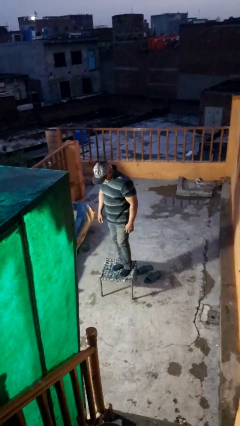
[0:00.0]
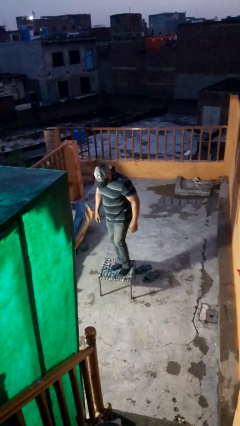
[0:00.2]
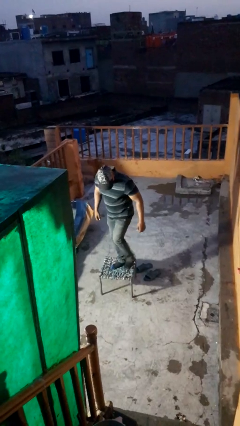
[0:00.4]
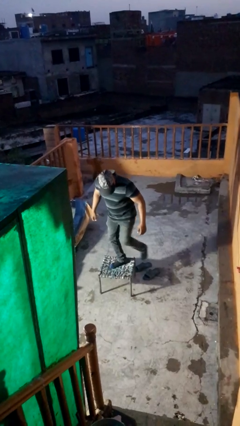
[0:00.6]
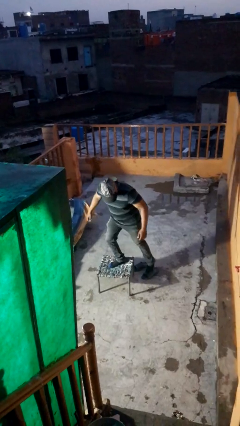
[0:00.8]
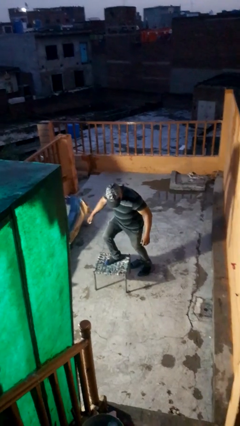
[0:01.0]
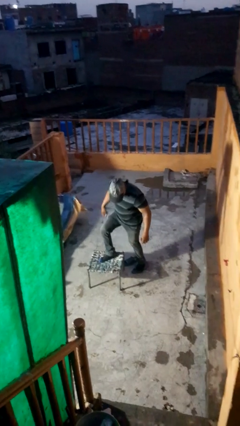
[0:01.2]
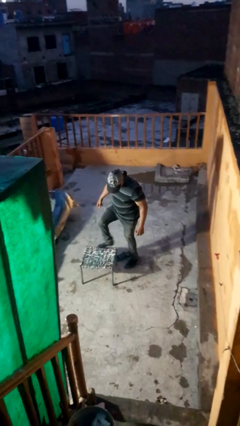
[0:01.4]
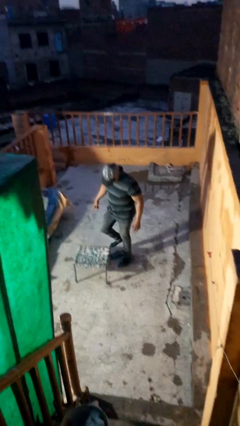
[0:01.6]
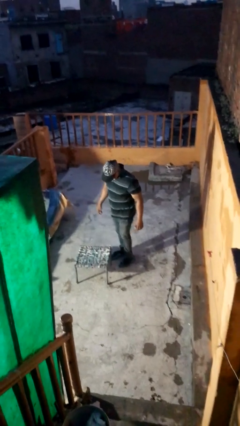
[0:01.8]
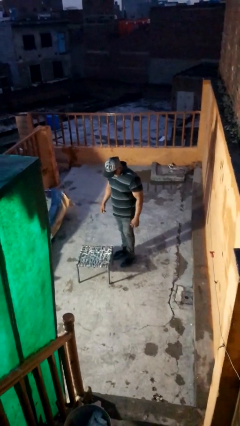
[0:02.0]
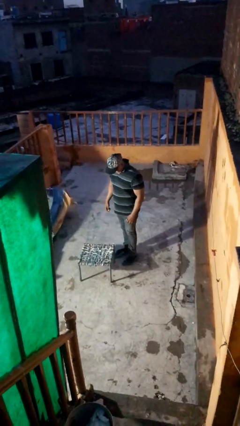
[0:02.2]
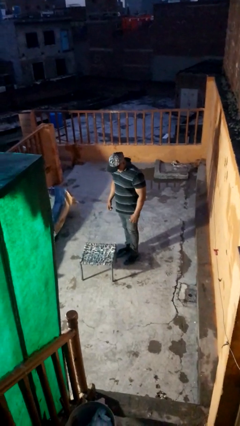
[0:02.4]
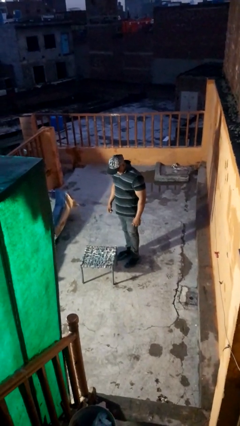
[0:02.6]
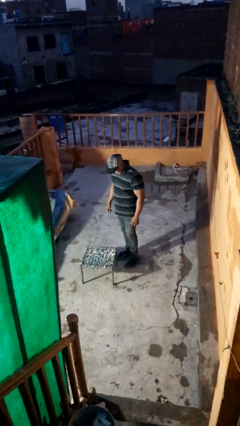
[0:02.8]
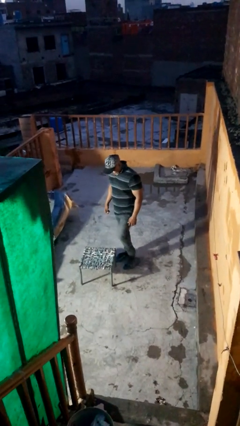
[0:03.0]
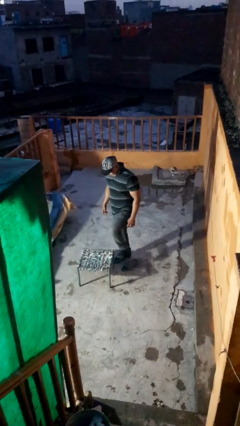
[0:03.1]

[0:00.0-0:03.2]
person climbs off table

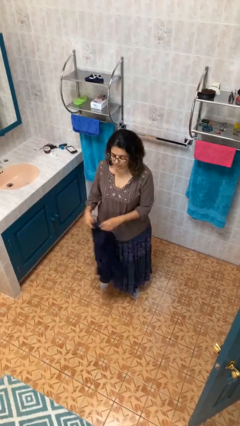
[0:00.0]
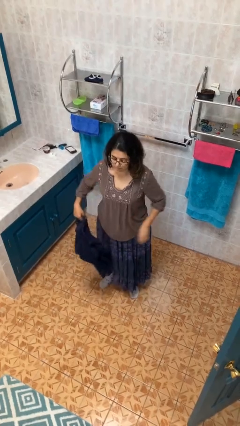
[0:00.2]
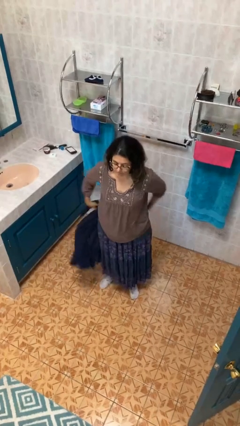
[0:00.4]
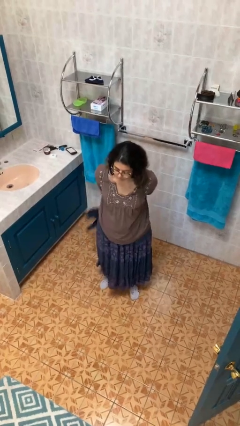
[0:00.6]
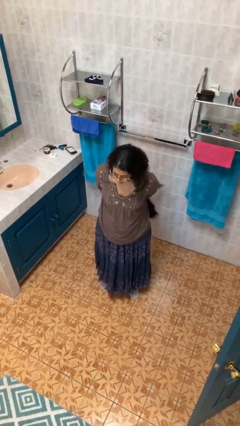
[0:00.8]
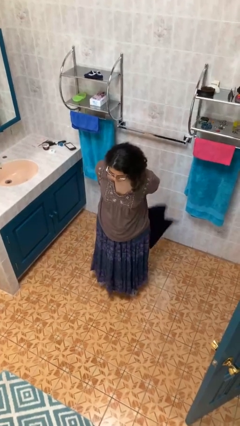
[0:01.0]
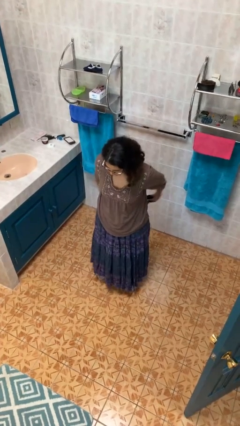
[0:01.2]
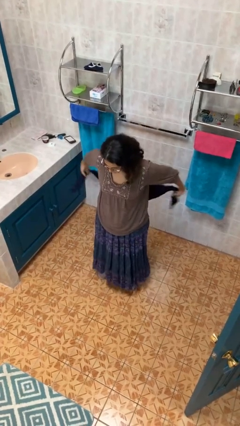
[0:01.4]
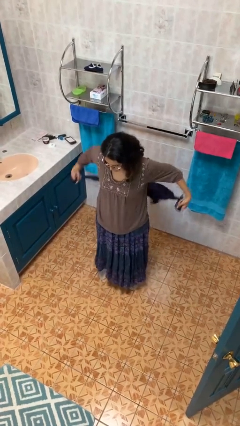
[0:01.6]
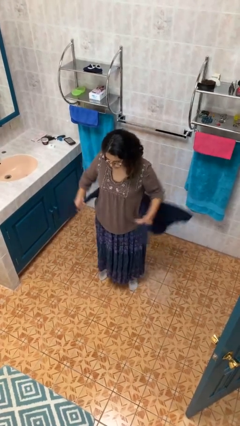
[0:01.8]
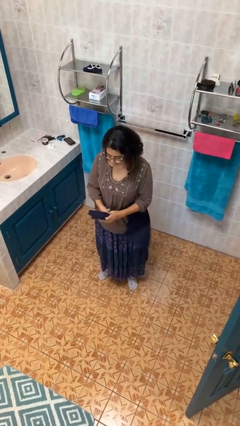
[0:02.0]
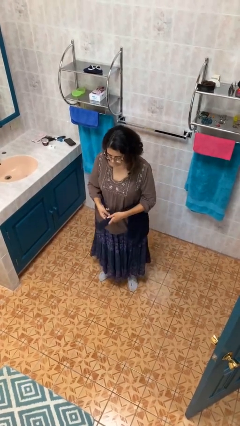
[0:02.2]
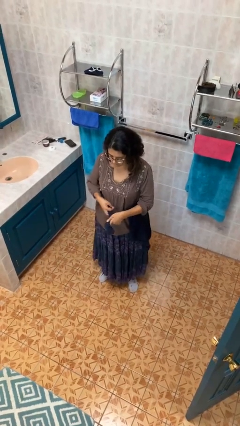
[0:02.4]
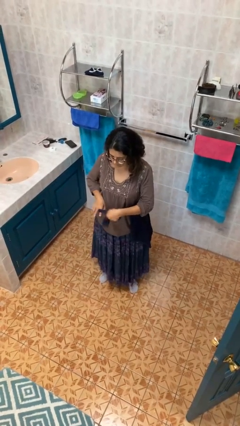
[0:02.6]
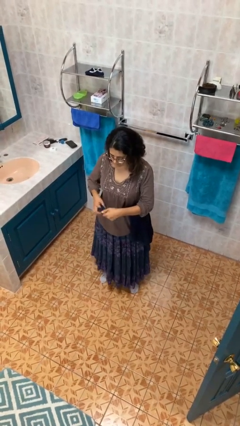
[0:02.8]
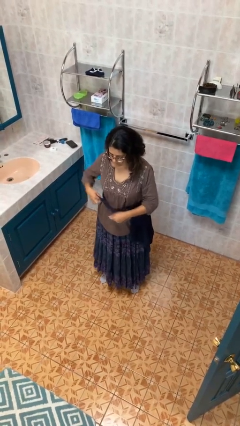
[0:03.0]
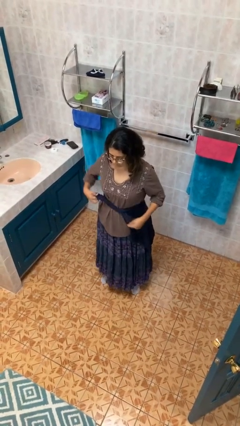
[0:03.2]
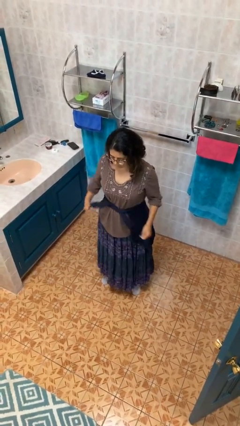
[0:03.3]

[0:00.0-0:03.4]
person ties jacket around waist

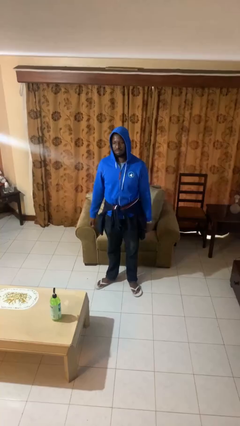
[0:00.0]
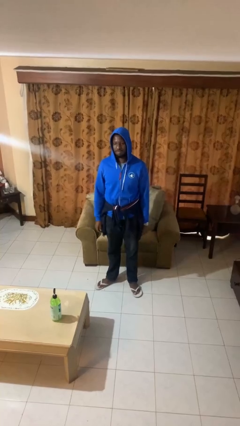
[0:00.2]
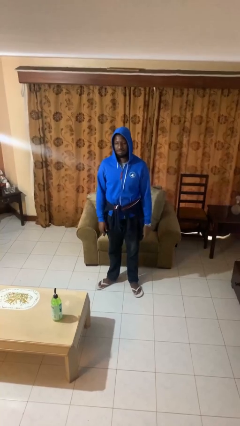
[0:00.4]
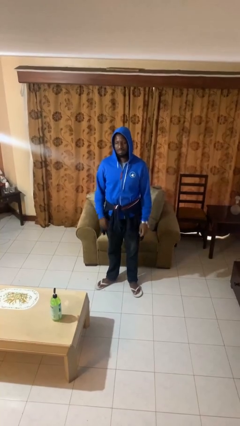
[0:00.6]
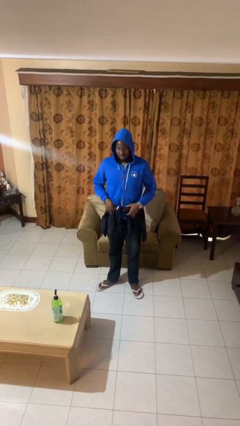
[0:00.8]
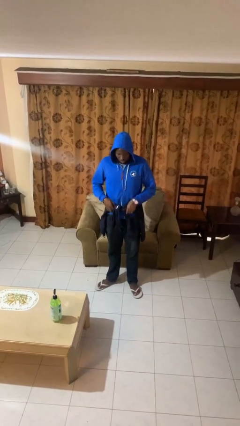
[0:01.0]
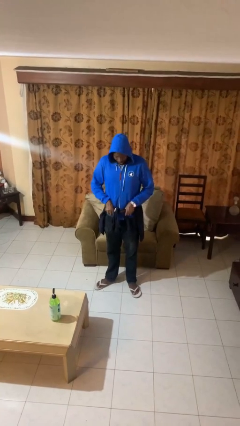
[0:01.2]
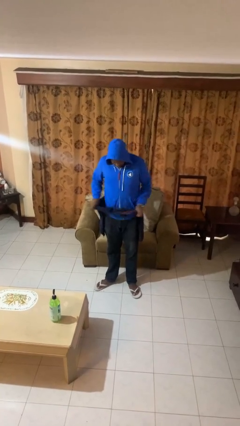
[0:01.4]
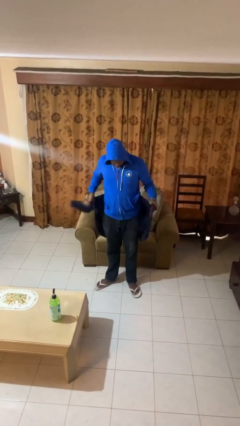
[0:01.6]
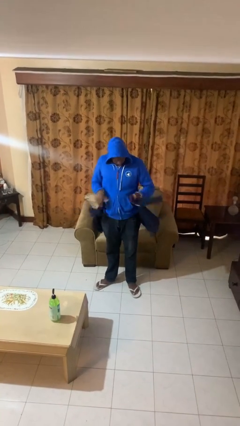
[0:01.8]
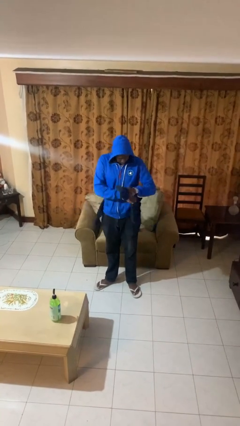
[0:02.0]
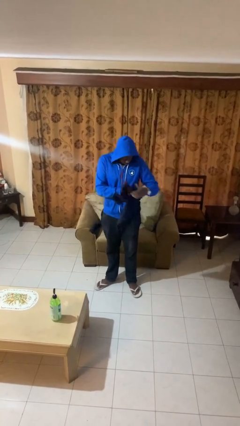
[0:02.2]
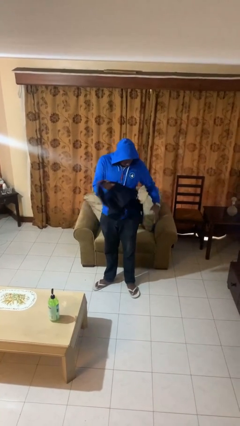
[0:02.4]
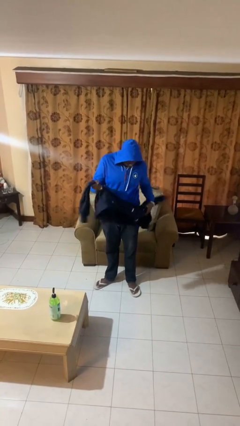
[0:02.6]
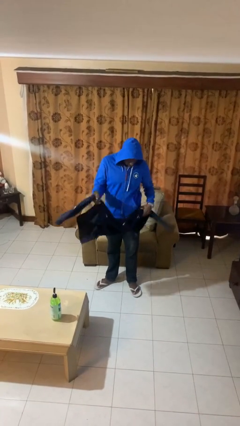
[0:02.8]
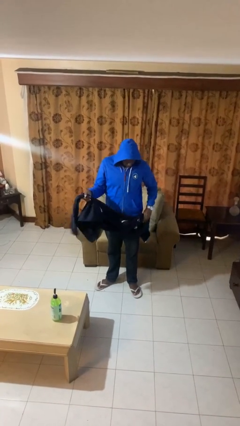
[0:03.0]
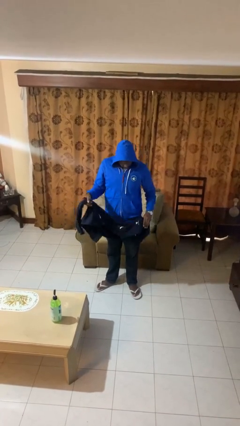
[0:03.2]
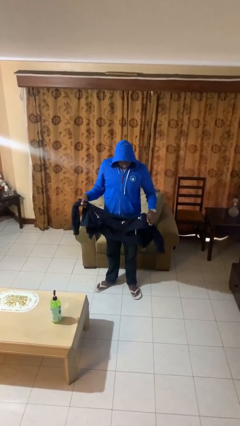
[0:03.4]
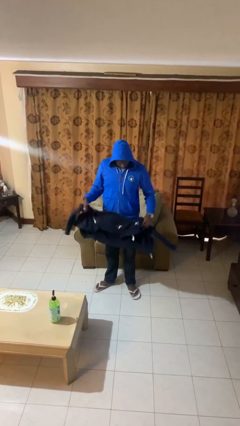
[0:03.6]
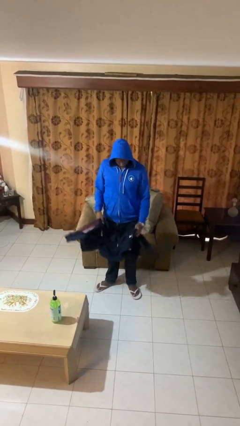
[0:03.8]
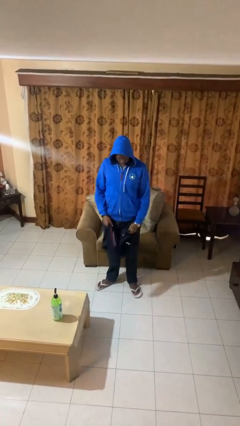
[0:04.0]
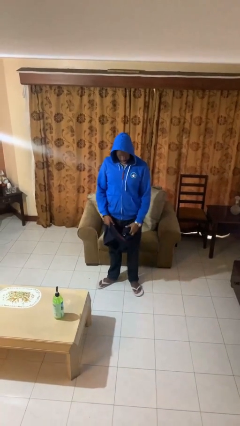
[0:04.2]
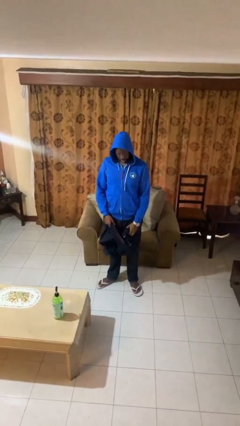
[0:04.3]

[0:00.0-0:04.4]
person unties jacket around waist

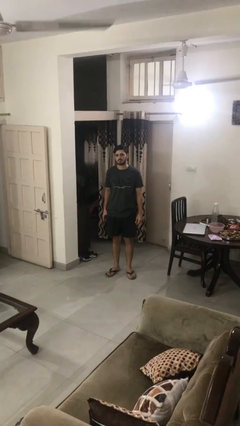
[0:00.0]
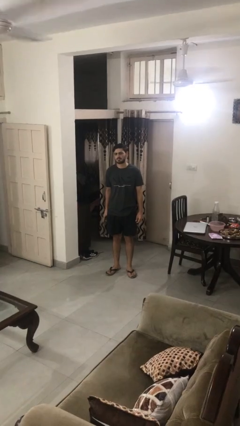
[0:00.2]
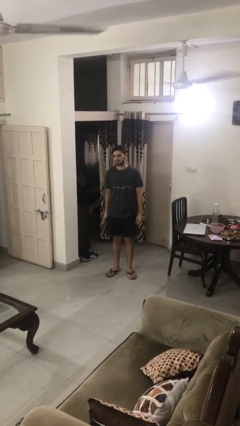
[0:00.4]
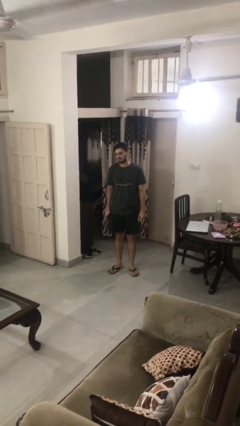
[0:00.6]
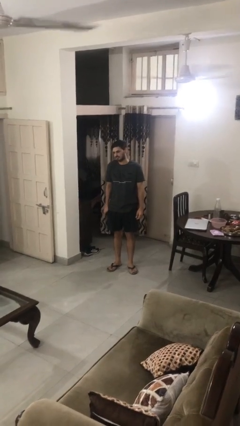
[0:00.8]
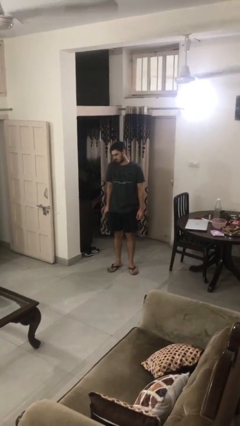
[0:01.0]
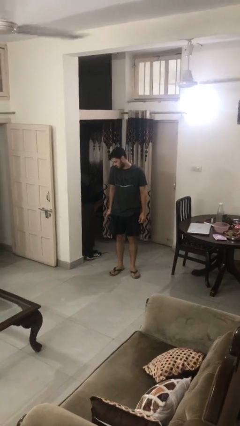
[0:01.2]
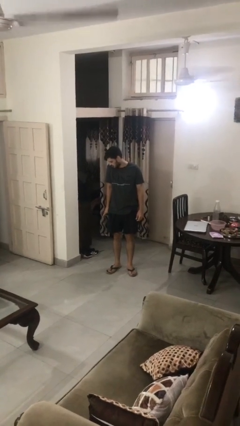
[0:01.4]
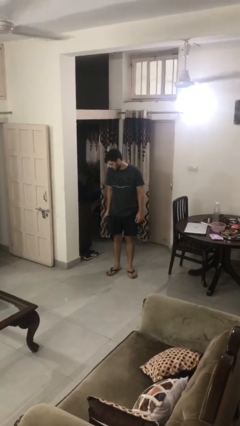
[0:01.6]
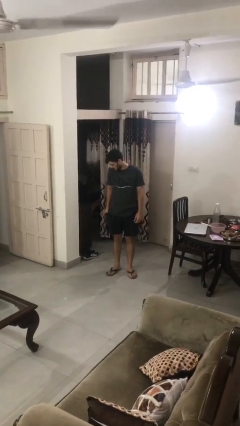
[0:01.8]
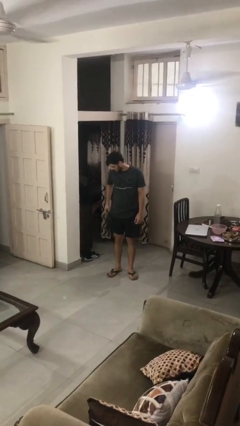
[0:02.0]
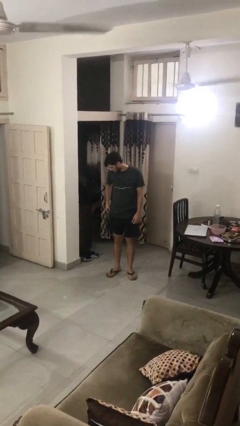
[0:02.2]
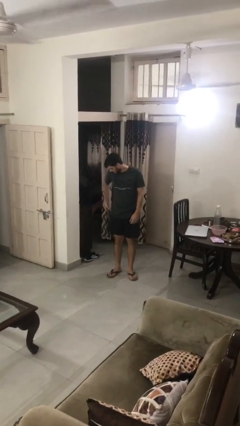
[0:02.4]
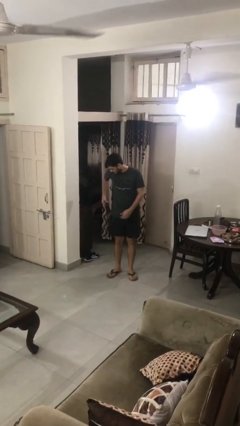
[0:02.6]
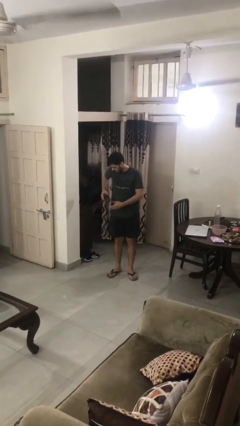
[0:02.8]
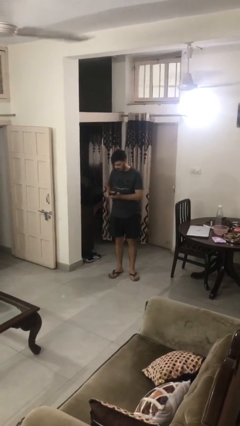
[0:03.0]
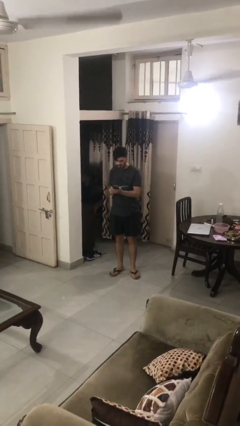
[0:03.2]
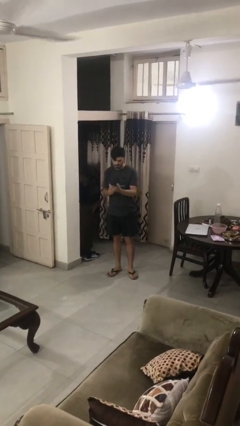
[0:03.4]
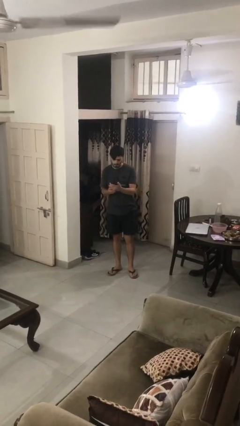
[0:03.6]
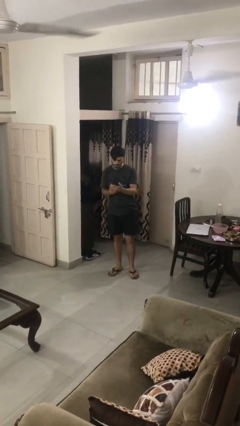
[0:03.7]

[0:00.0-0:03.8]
person takes phone from pocket

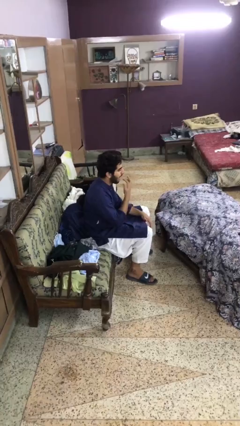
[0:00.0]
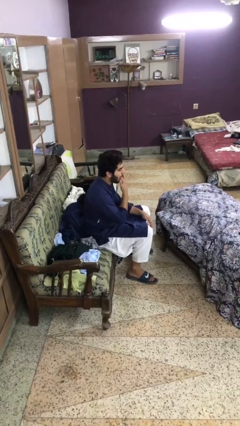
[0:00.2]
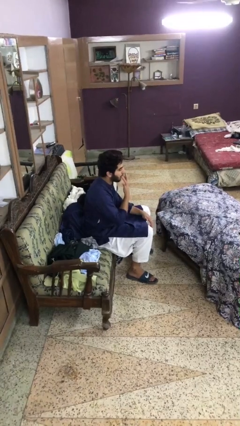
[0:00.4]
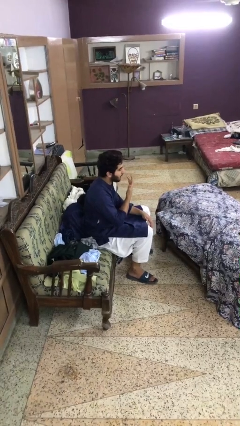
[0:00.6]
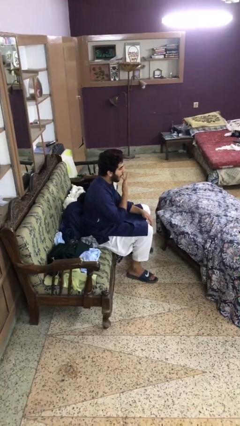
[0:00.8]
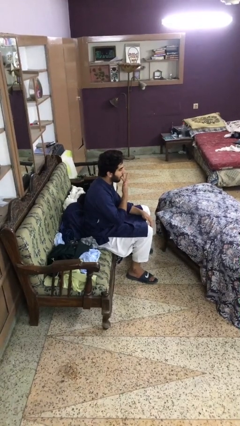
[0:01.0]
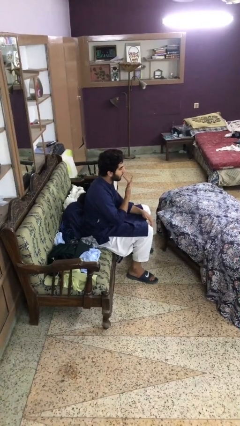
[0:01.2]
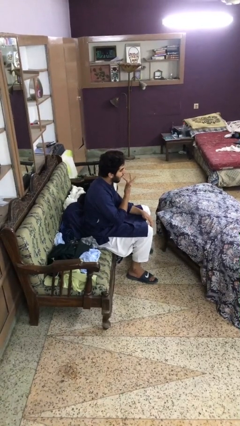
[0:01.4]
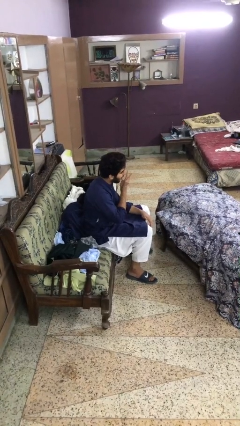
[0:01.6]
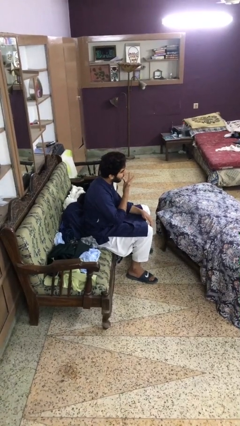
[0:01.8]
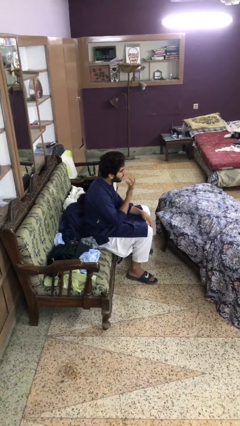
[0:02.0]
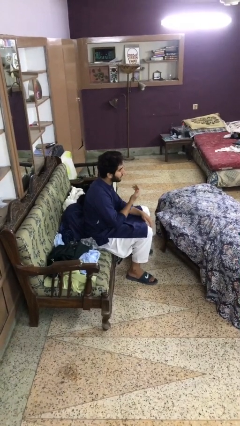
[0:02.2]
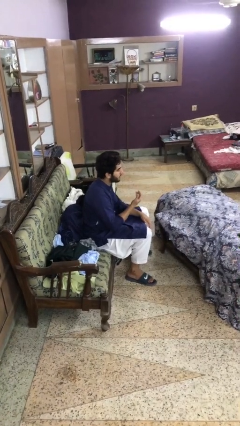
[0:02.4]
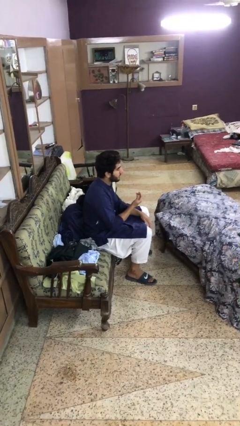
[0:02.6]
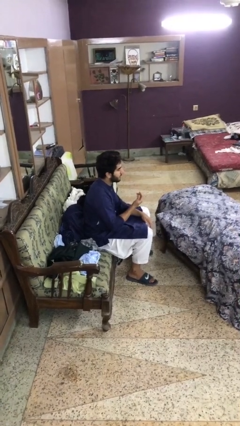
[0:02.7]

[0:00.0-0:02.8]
person licks fingers
